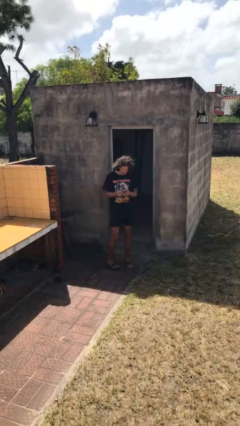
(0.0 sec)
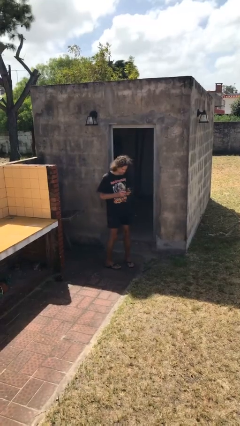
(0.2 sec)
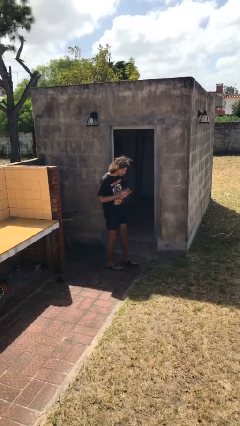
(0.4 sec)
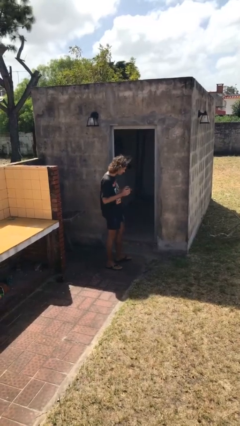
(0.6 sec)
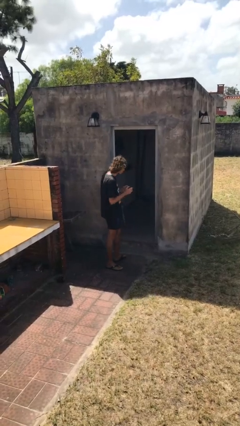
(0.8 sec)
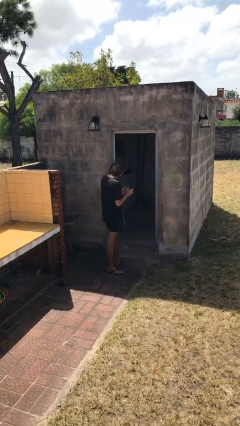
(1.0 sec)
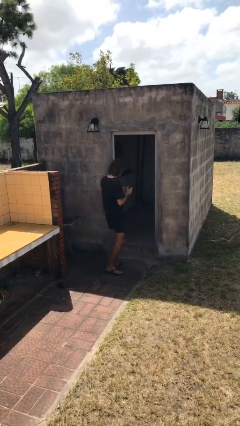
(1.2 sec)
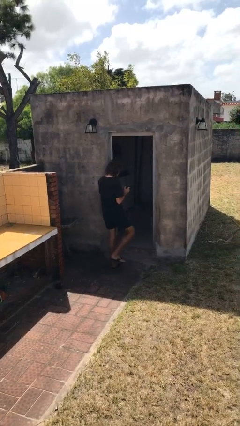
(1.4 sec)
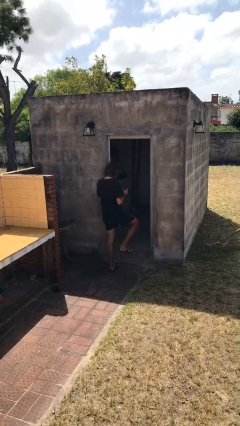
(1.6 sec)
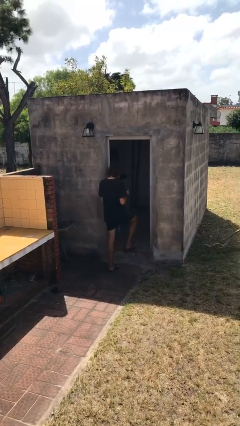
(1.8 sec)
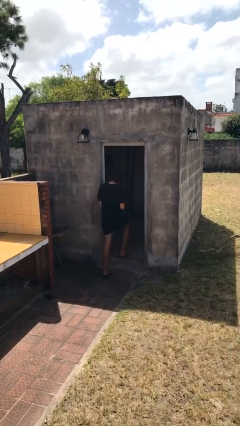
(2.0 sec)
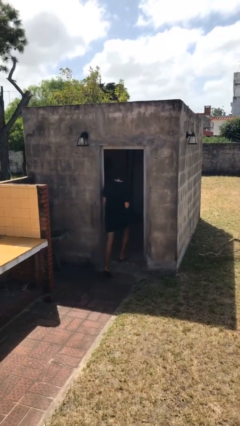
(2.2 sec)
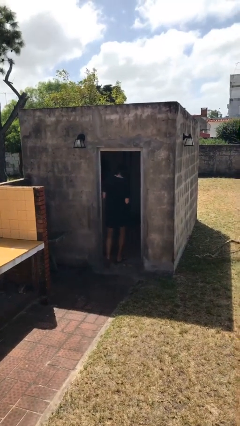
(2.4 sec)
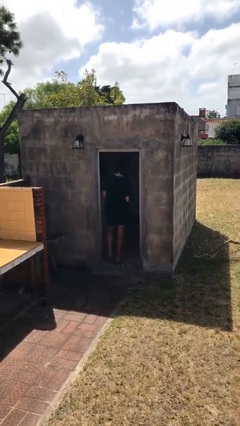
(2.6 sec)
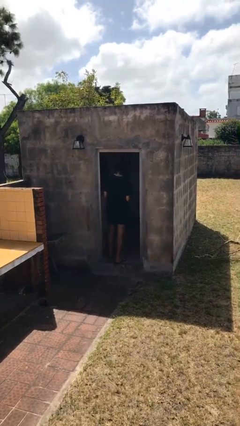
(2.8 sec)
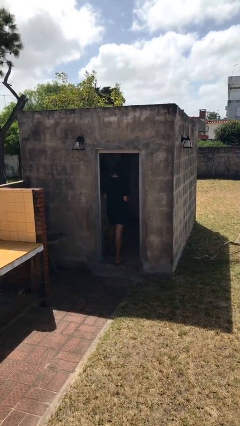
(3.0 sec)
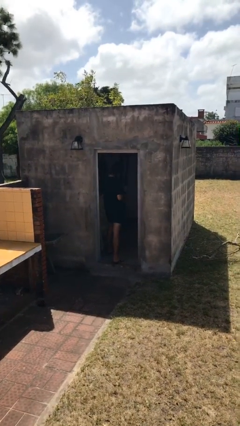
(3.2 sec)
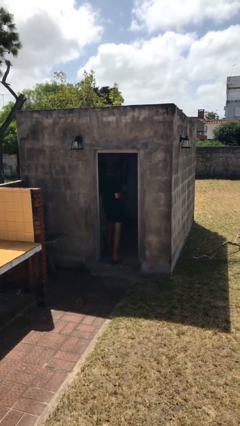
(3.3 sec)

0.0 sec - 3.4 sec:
person exits scene through structure

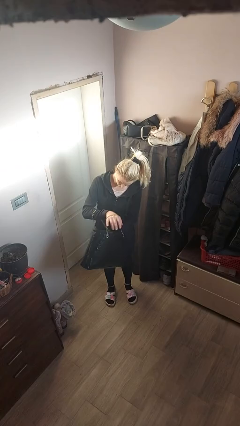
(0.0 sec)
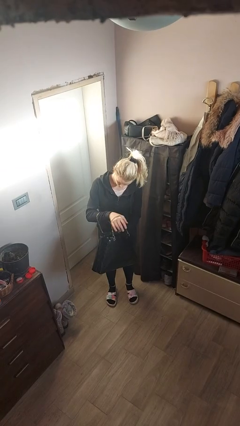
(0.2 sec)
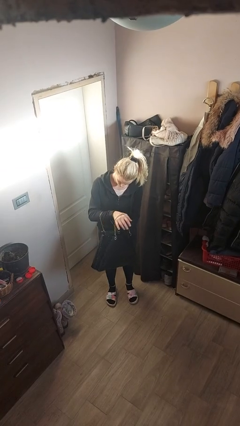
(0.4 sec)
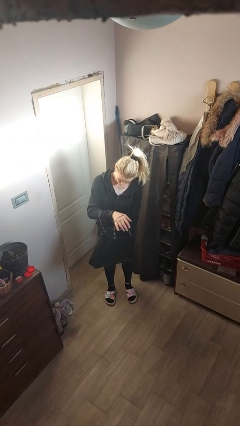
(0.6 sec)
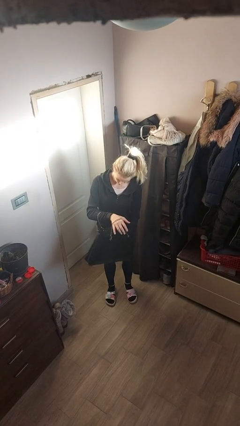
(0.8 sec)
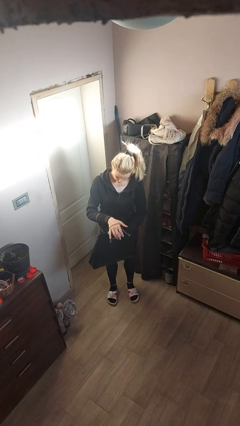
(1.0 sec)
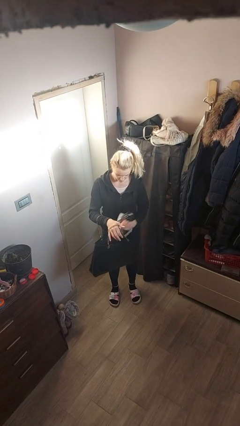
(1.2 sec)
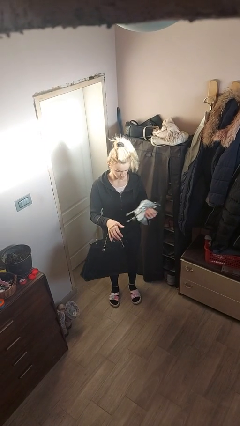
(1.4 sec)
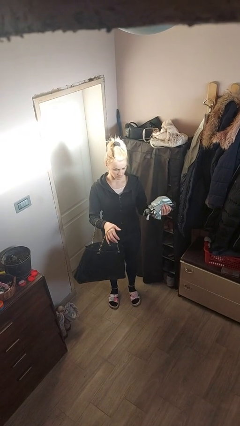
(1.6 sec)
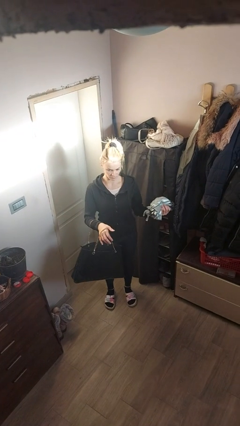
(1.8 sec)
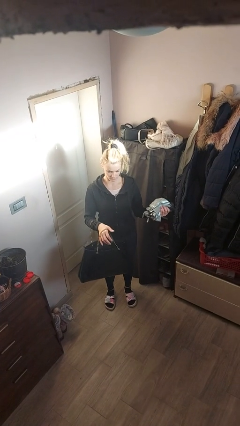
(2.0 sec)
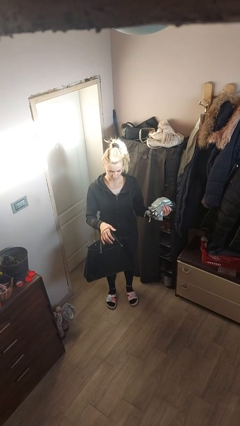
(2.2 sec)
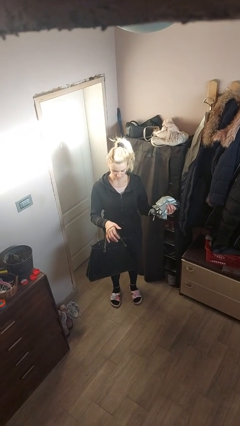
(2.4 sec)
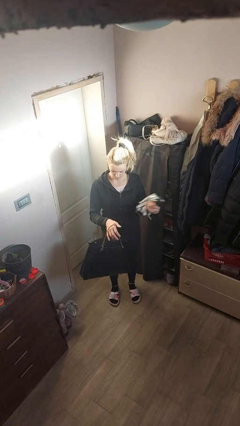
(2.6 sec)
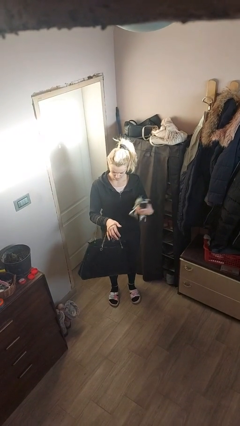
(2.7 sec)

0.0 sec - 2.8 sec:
person takes object from purse

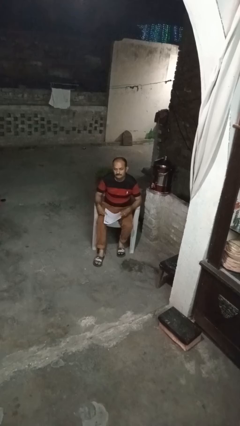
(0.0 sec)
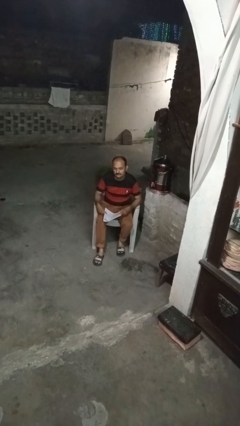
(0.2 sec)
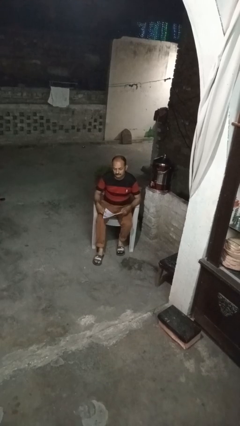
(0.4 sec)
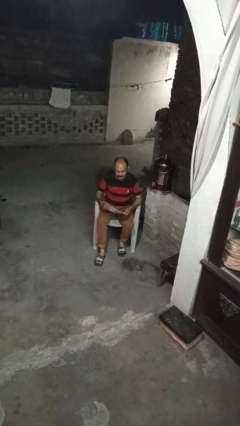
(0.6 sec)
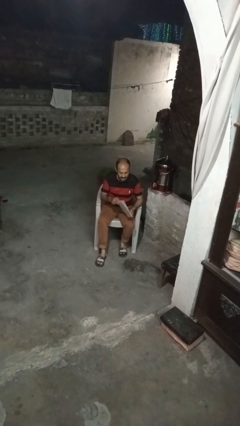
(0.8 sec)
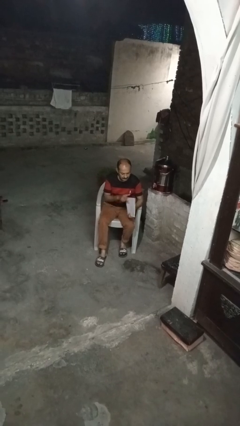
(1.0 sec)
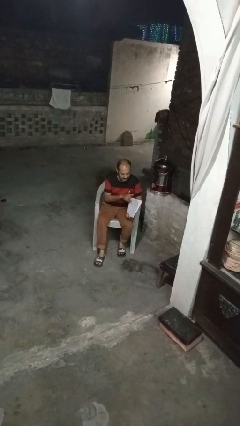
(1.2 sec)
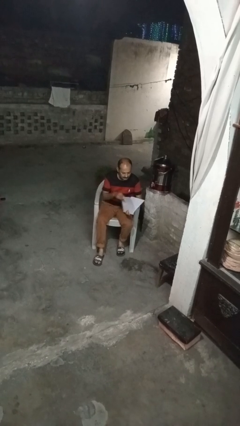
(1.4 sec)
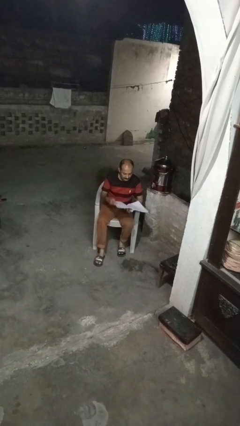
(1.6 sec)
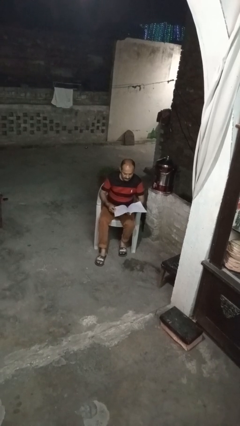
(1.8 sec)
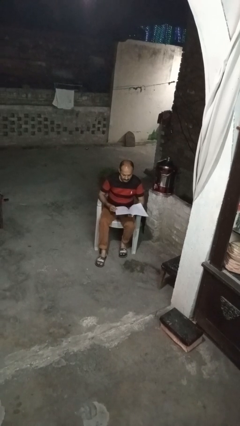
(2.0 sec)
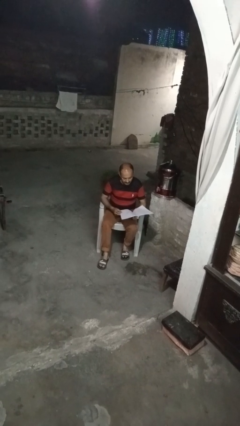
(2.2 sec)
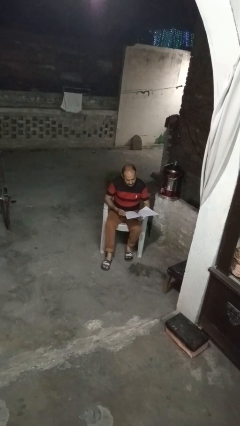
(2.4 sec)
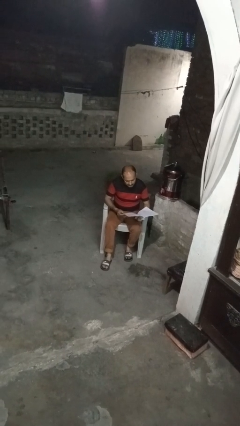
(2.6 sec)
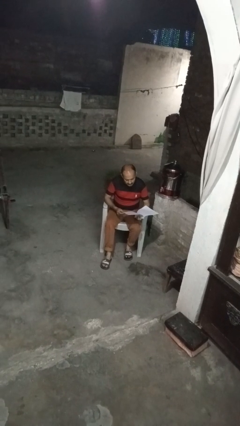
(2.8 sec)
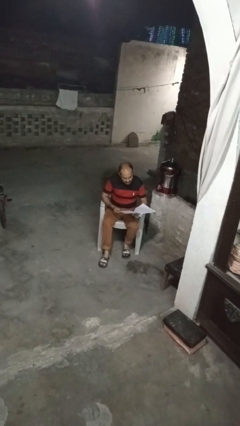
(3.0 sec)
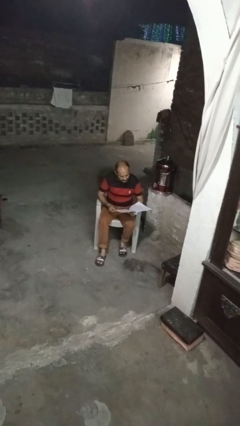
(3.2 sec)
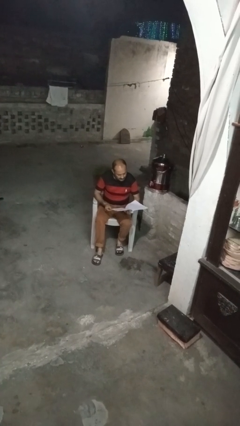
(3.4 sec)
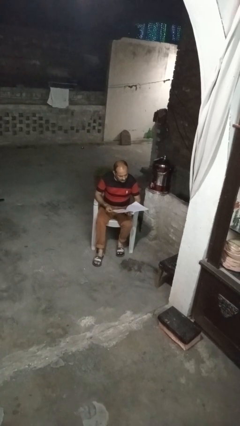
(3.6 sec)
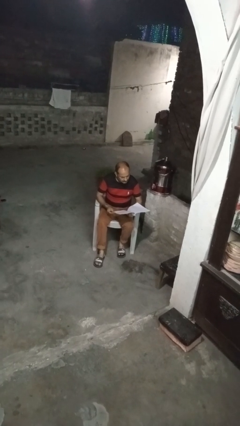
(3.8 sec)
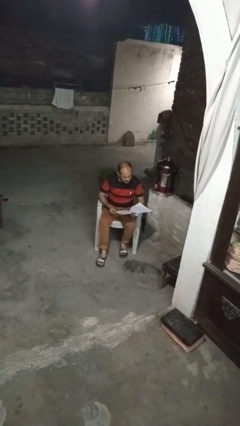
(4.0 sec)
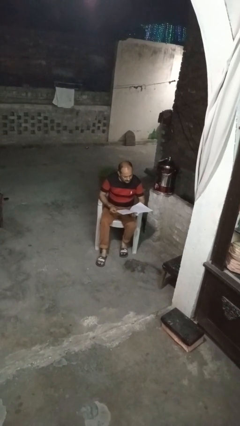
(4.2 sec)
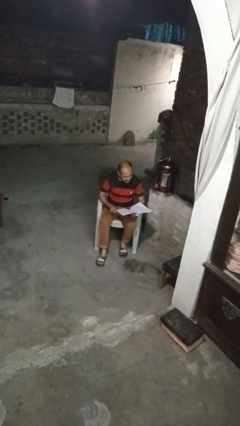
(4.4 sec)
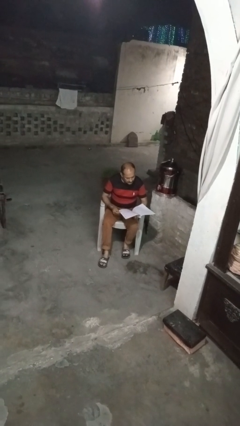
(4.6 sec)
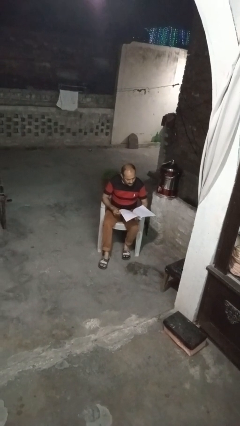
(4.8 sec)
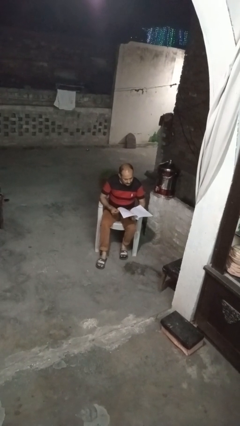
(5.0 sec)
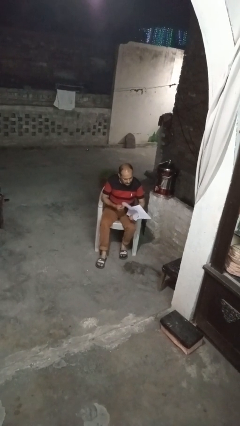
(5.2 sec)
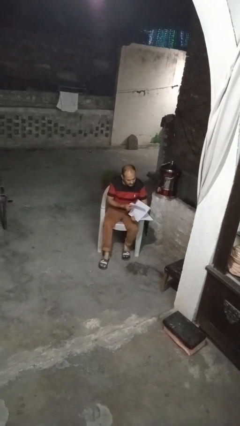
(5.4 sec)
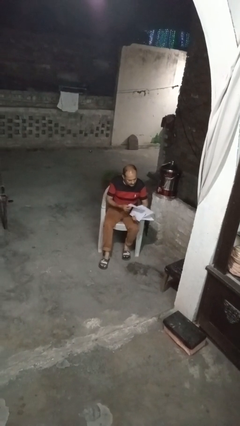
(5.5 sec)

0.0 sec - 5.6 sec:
person reads magazine

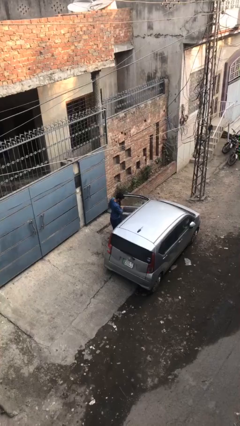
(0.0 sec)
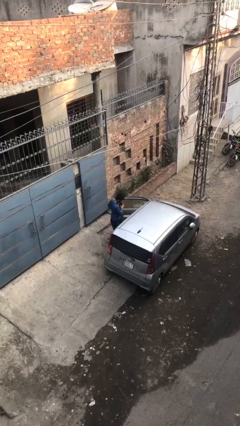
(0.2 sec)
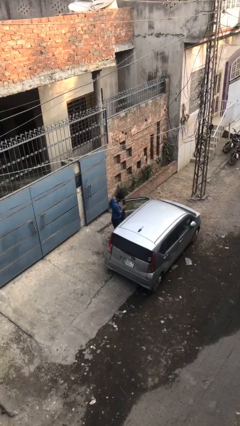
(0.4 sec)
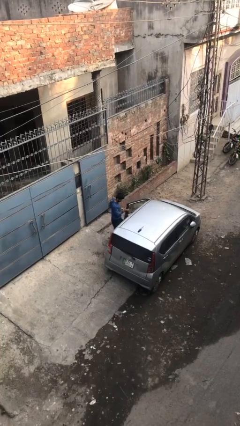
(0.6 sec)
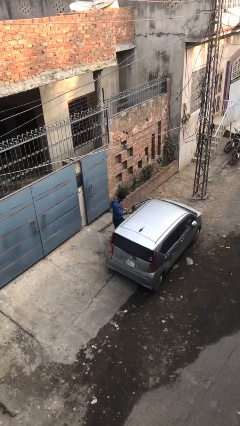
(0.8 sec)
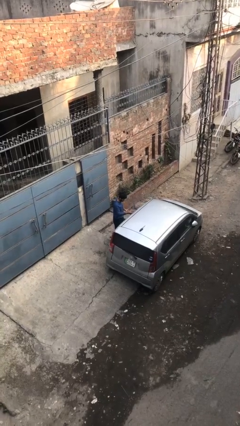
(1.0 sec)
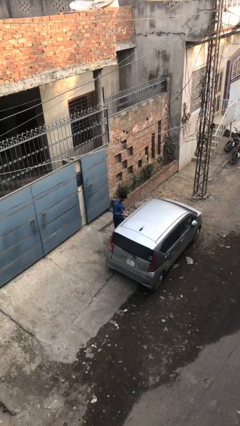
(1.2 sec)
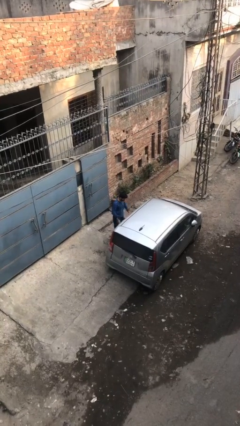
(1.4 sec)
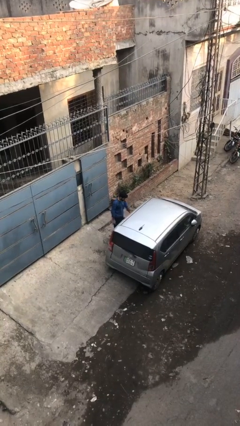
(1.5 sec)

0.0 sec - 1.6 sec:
person closes car door

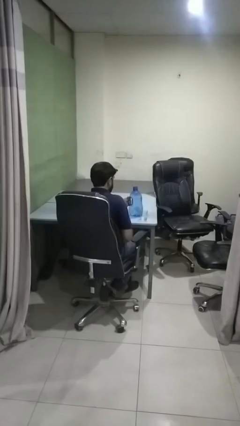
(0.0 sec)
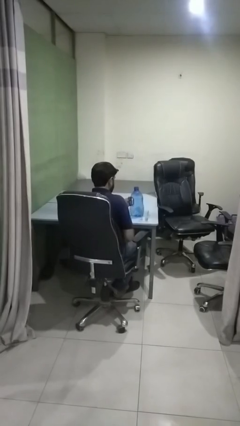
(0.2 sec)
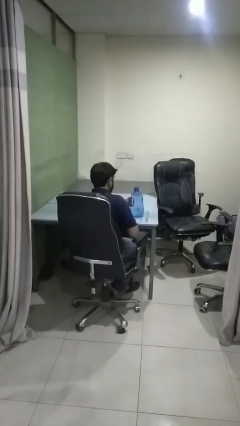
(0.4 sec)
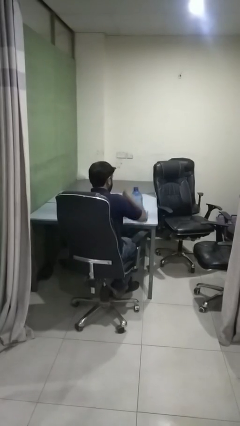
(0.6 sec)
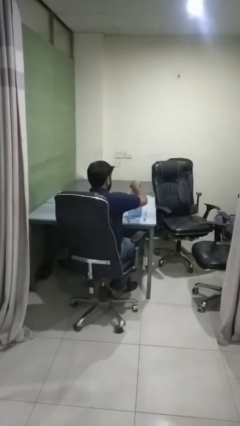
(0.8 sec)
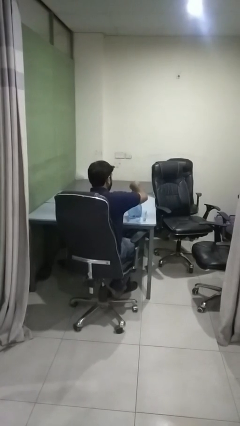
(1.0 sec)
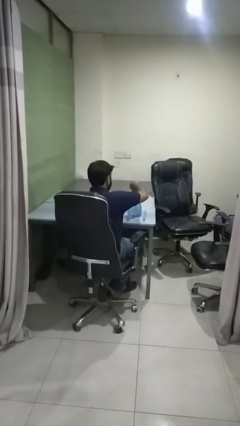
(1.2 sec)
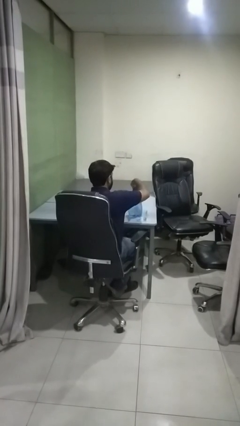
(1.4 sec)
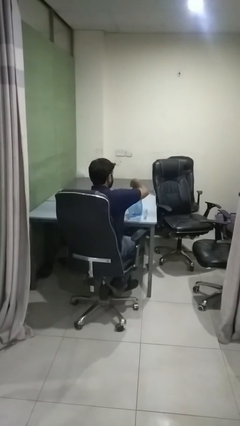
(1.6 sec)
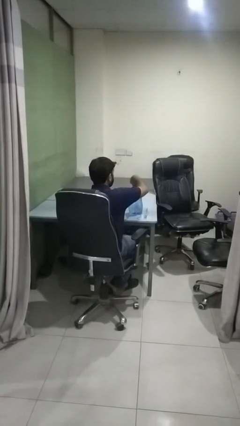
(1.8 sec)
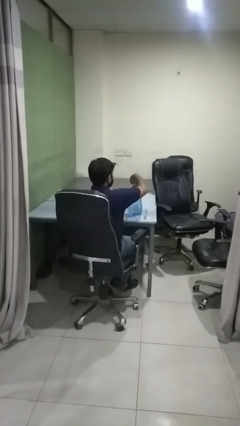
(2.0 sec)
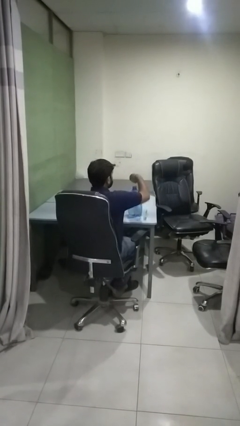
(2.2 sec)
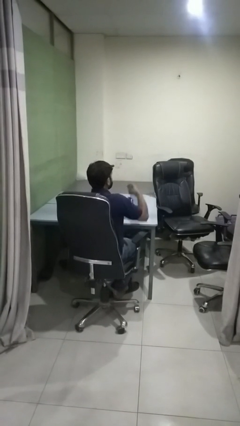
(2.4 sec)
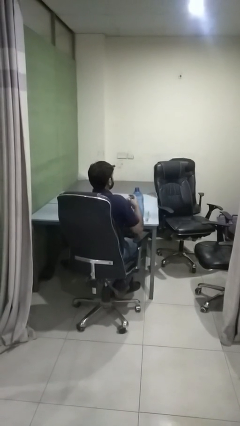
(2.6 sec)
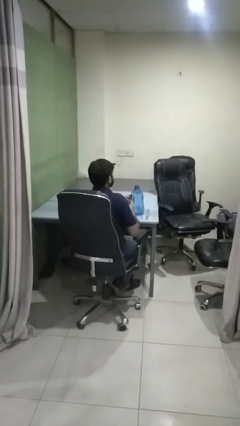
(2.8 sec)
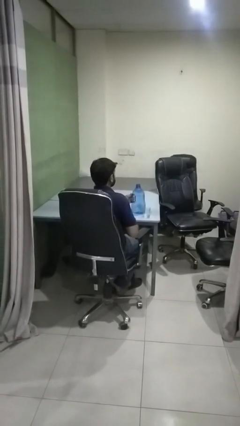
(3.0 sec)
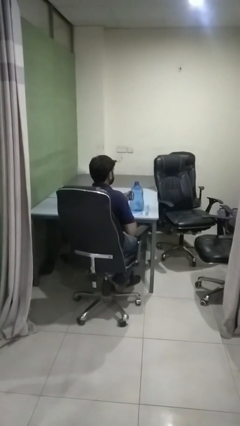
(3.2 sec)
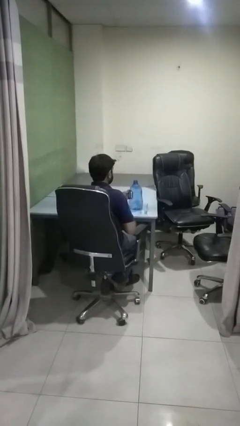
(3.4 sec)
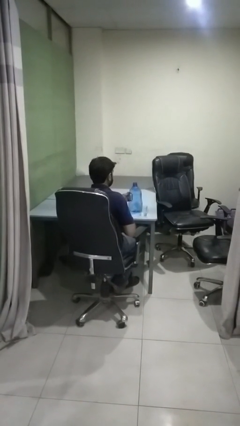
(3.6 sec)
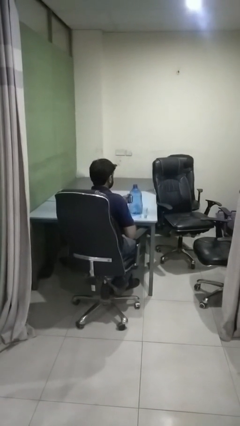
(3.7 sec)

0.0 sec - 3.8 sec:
person unscrews lid from bottle
